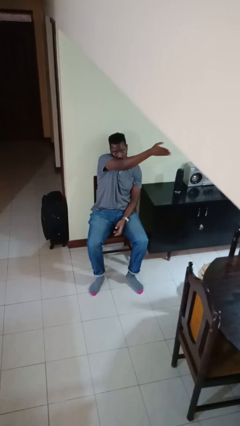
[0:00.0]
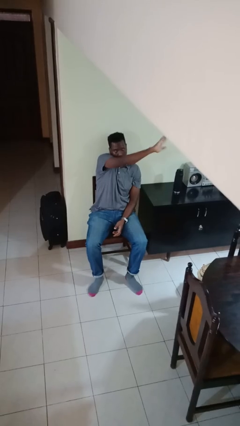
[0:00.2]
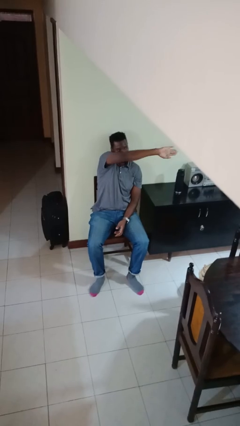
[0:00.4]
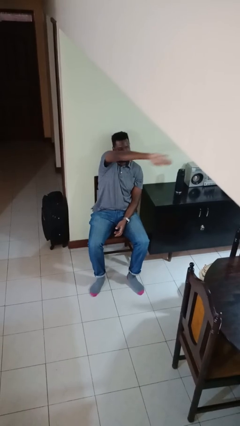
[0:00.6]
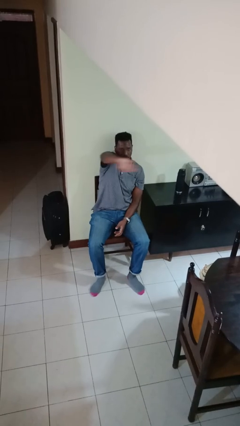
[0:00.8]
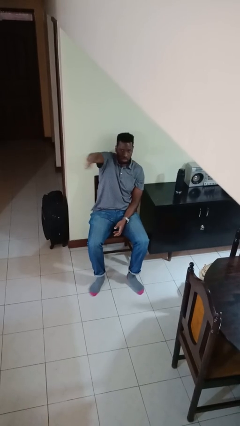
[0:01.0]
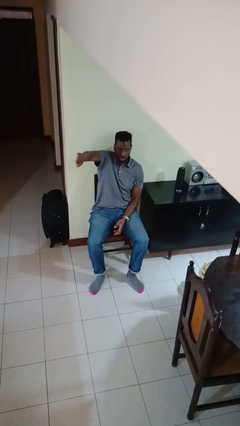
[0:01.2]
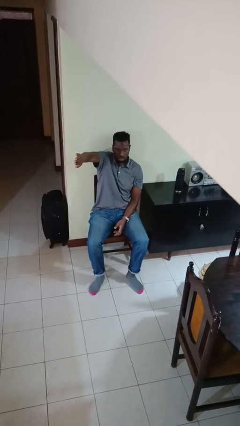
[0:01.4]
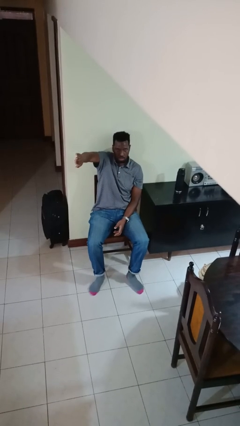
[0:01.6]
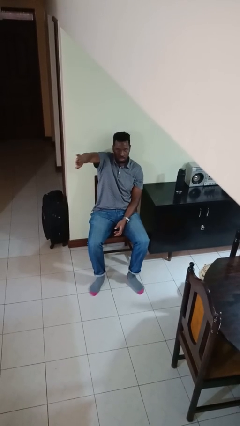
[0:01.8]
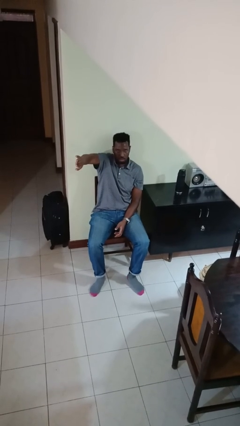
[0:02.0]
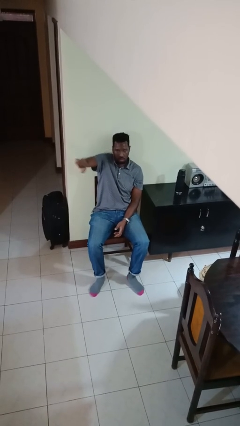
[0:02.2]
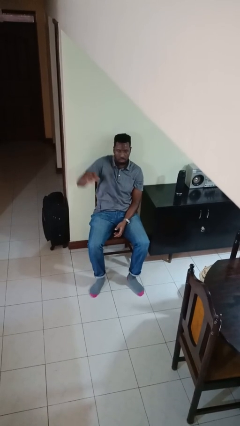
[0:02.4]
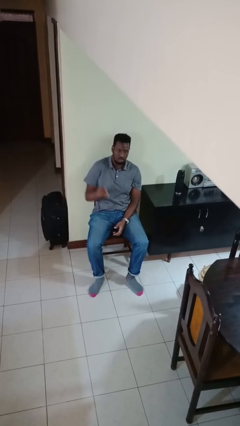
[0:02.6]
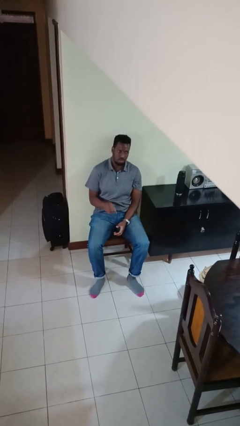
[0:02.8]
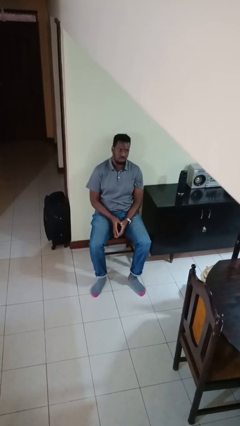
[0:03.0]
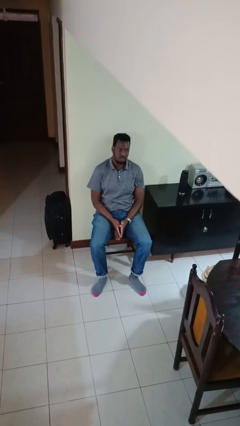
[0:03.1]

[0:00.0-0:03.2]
person gestures swipe right

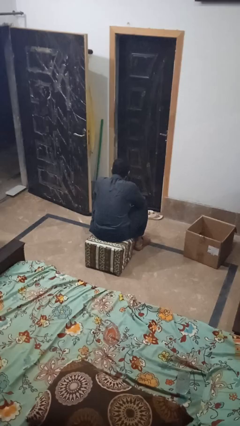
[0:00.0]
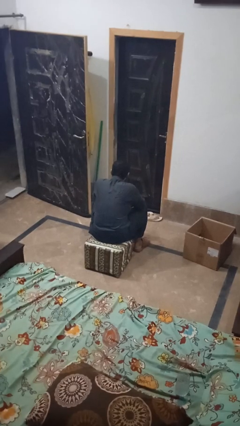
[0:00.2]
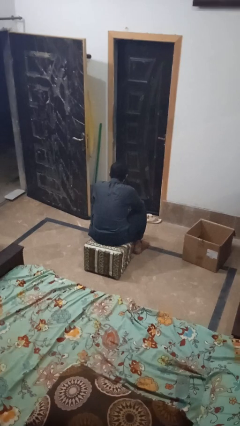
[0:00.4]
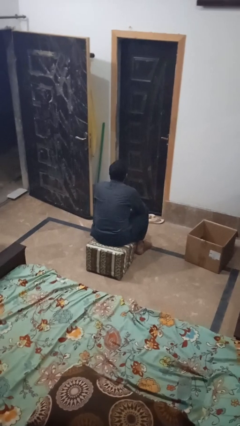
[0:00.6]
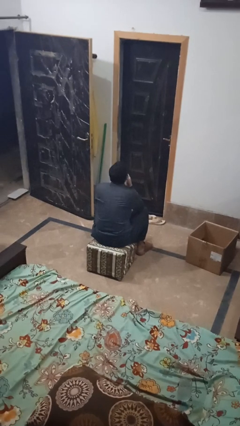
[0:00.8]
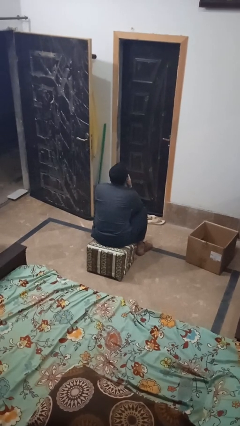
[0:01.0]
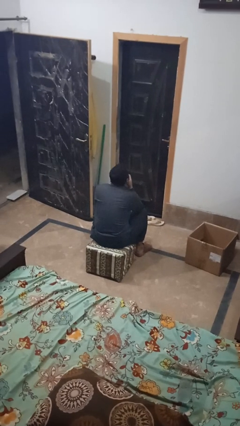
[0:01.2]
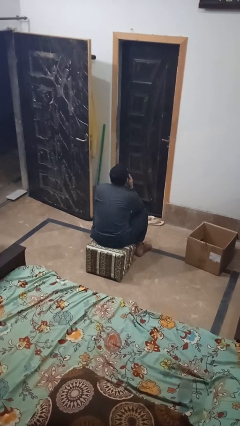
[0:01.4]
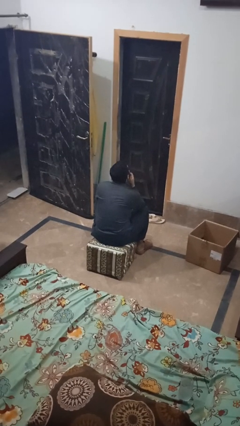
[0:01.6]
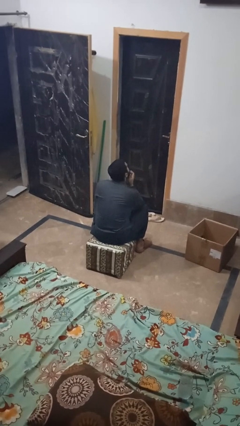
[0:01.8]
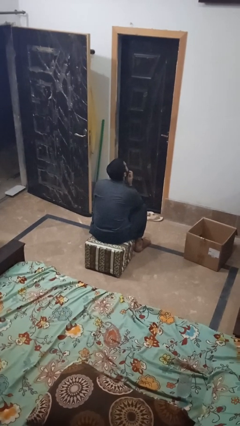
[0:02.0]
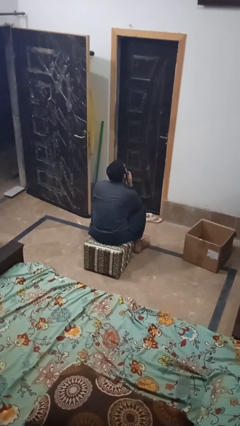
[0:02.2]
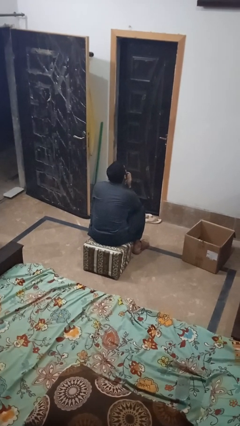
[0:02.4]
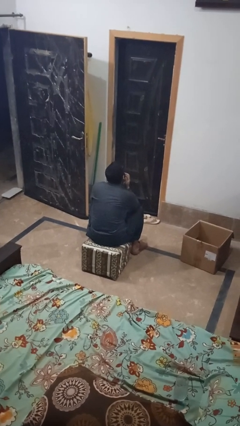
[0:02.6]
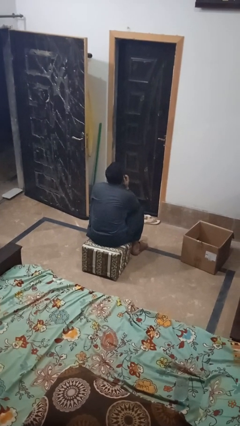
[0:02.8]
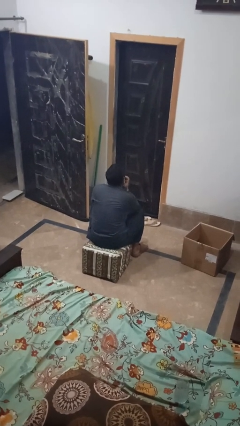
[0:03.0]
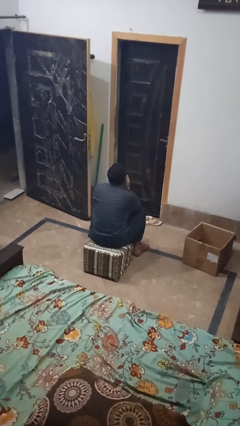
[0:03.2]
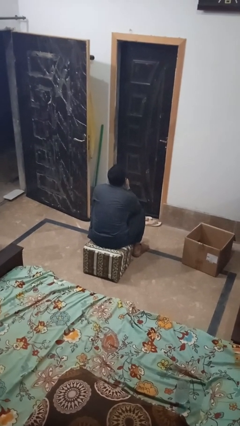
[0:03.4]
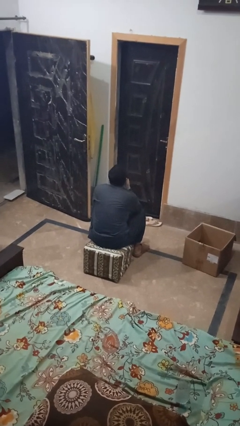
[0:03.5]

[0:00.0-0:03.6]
person strokes chin

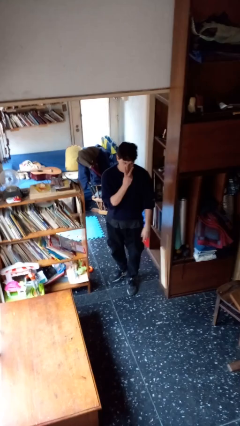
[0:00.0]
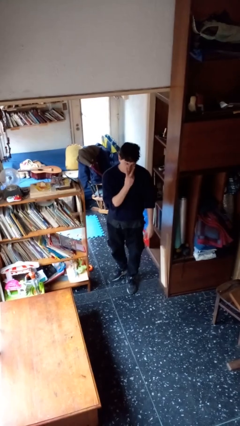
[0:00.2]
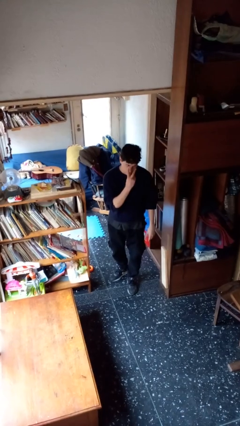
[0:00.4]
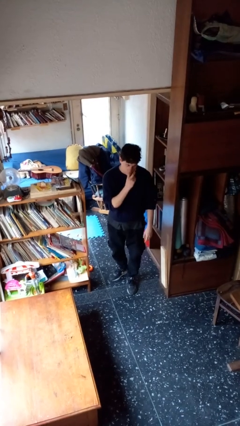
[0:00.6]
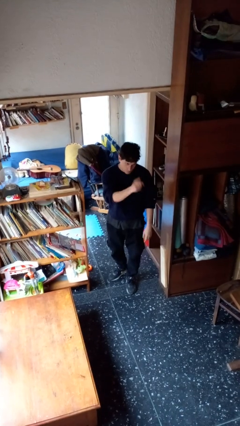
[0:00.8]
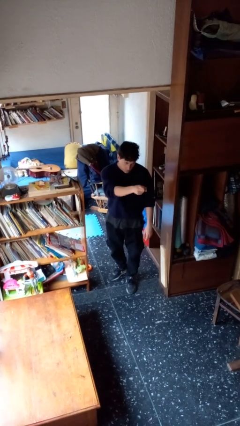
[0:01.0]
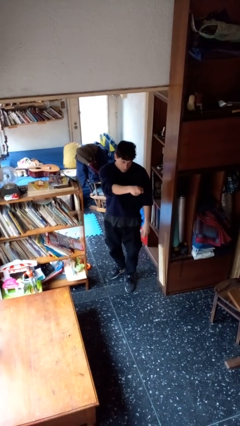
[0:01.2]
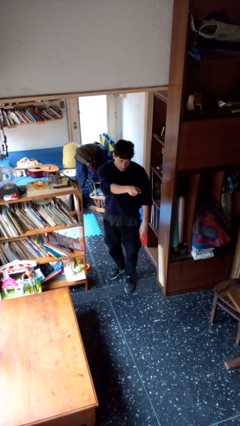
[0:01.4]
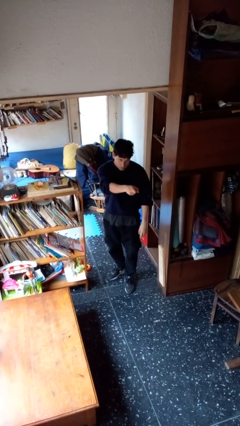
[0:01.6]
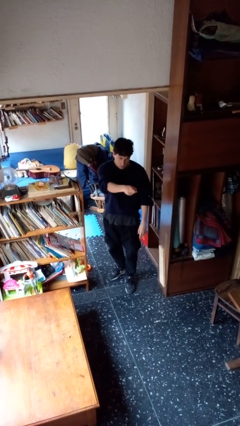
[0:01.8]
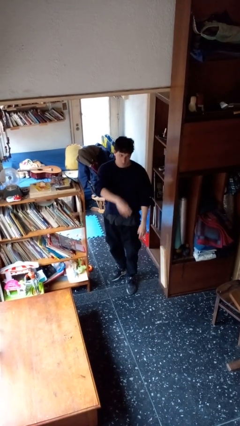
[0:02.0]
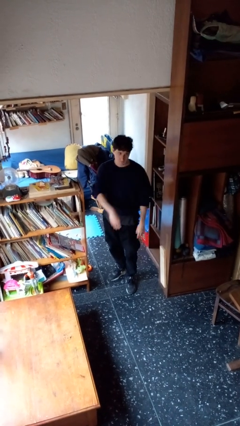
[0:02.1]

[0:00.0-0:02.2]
person gestures watch closely

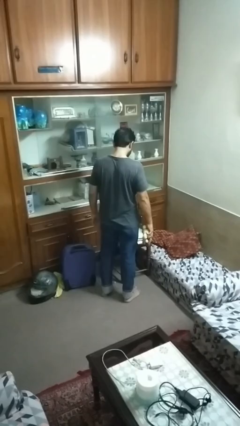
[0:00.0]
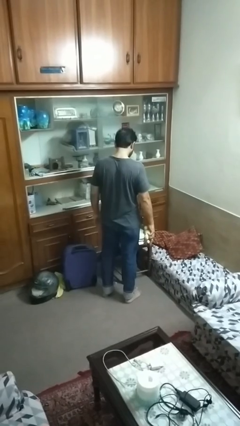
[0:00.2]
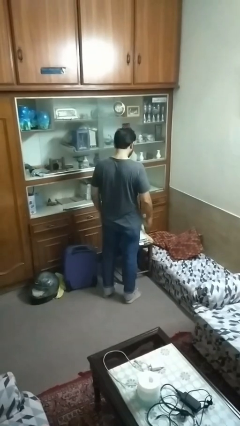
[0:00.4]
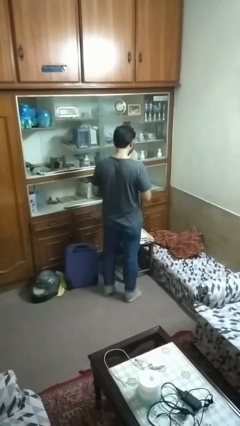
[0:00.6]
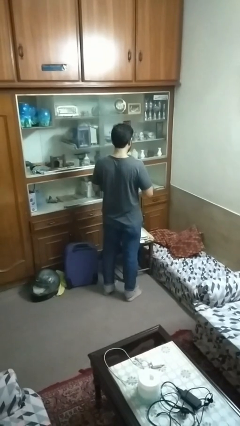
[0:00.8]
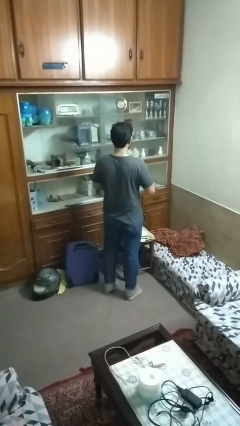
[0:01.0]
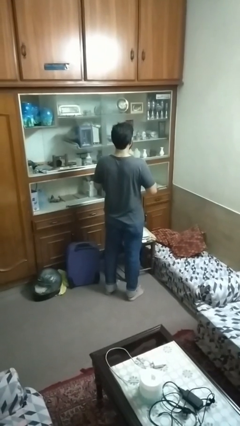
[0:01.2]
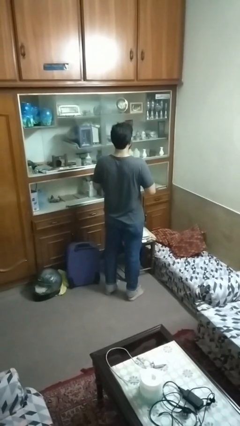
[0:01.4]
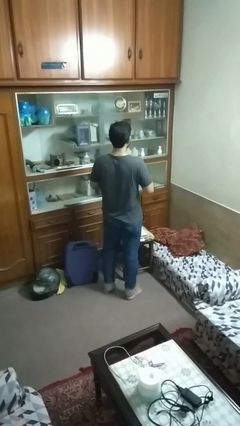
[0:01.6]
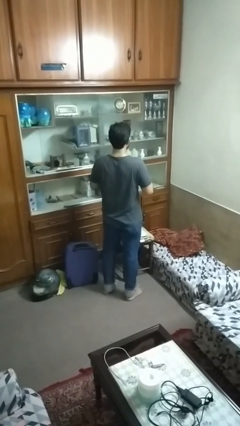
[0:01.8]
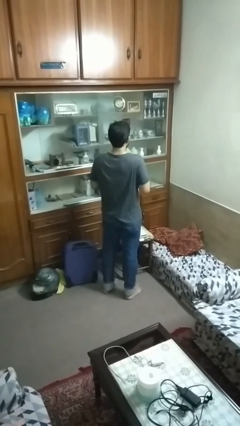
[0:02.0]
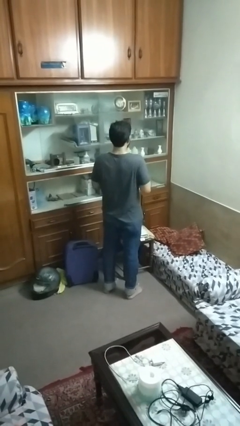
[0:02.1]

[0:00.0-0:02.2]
person hugs stuffed animal

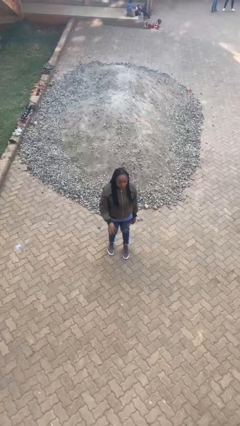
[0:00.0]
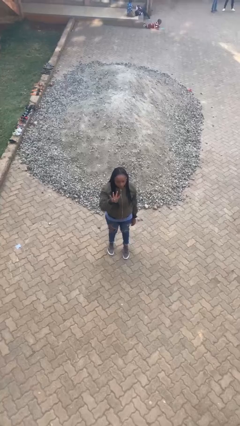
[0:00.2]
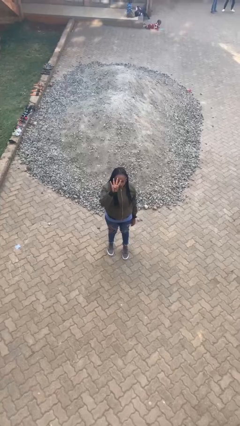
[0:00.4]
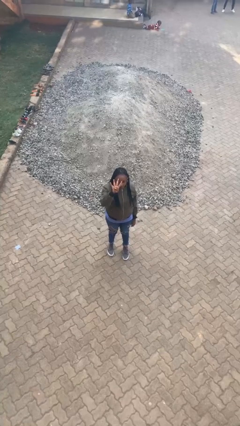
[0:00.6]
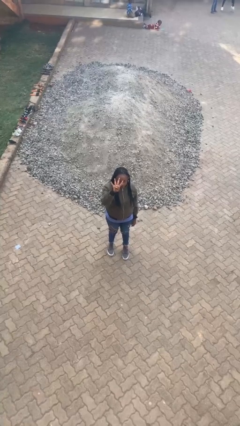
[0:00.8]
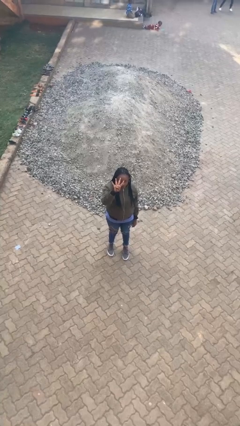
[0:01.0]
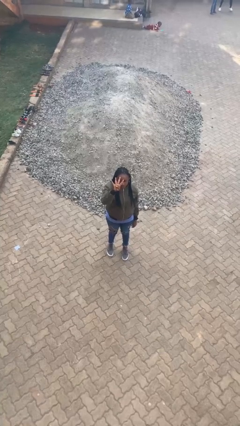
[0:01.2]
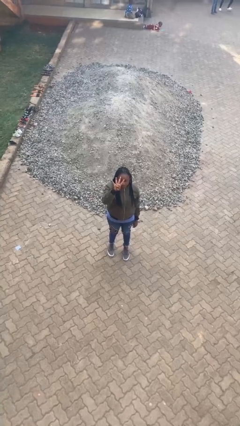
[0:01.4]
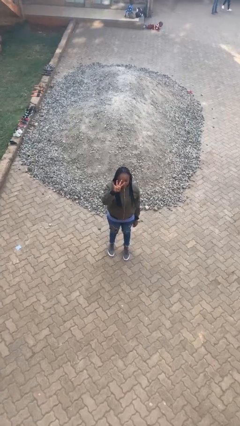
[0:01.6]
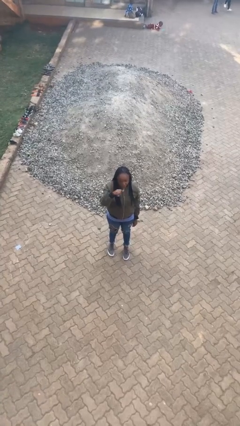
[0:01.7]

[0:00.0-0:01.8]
person gestures number four

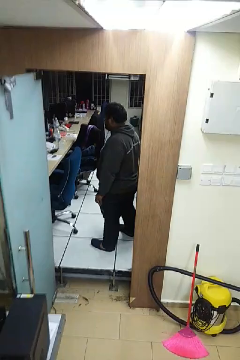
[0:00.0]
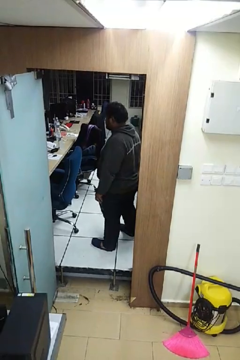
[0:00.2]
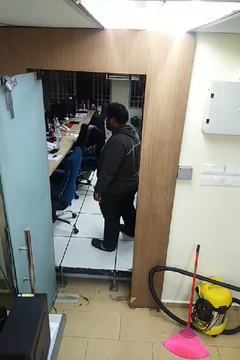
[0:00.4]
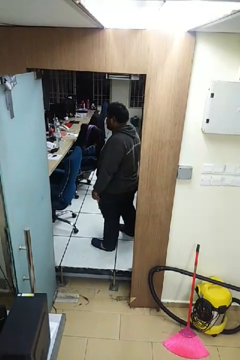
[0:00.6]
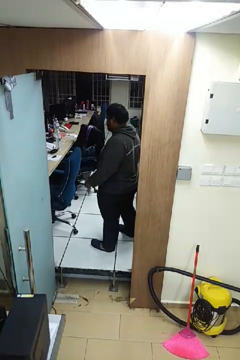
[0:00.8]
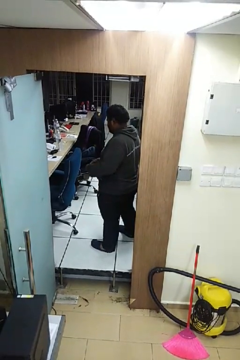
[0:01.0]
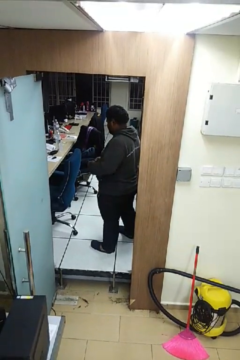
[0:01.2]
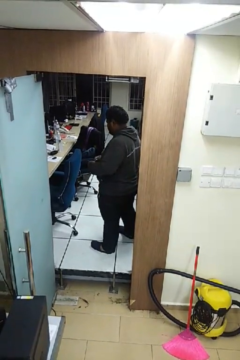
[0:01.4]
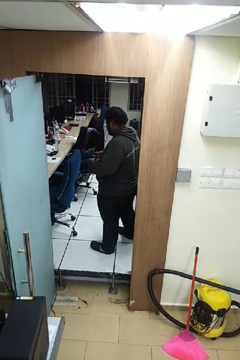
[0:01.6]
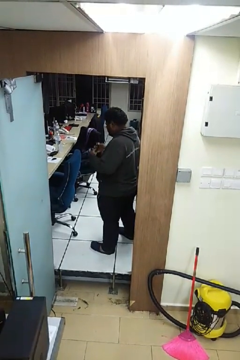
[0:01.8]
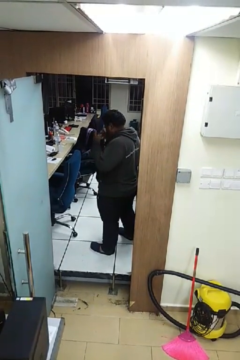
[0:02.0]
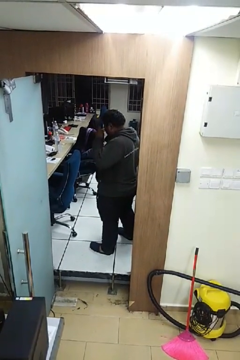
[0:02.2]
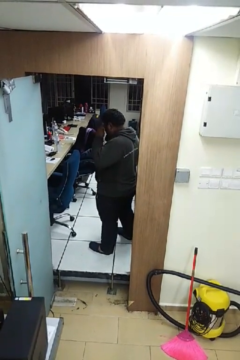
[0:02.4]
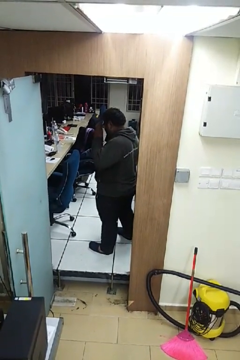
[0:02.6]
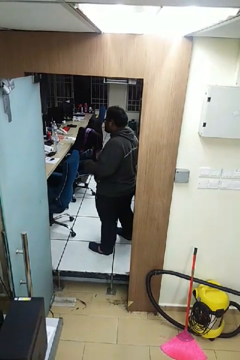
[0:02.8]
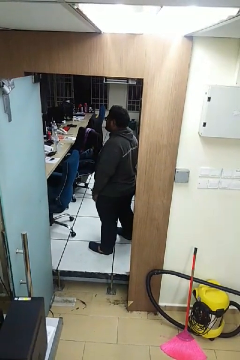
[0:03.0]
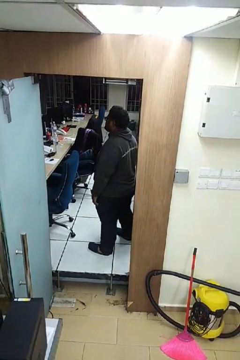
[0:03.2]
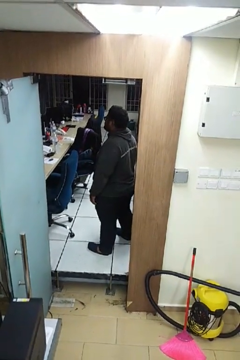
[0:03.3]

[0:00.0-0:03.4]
person puts on glasses

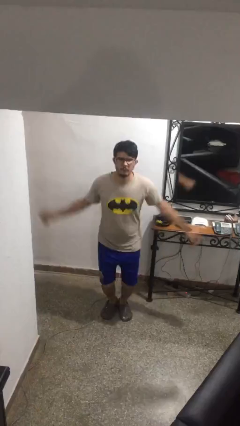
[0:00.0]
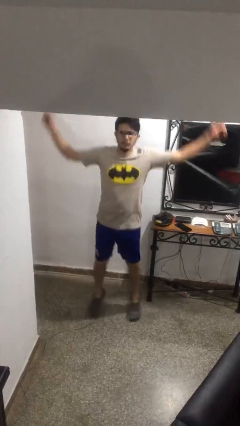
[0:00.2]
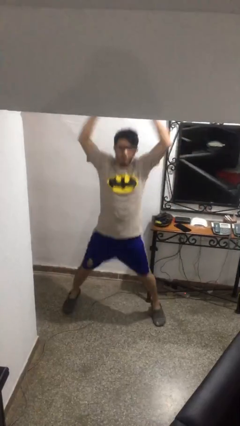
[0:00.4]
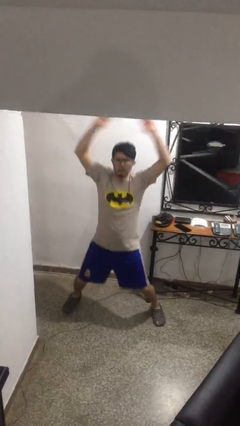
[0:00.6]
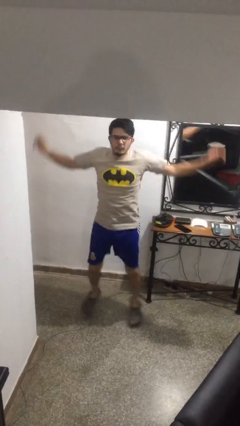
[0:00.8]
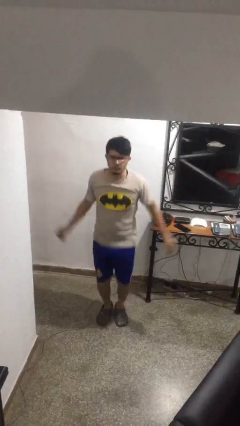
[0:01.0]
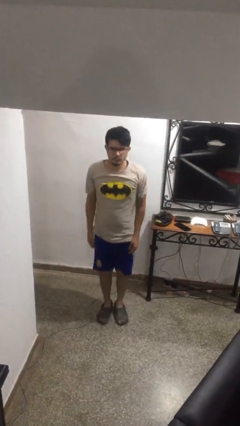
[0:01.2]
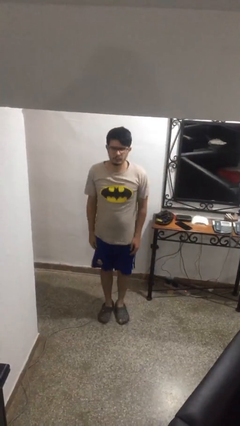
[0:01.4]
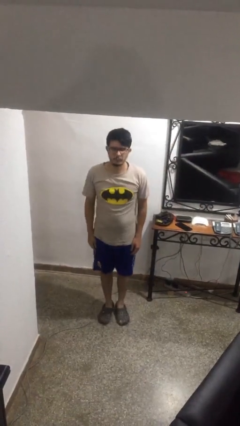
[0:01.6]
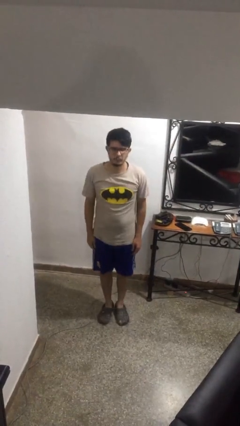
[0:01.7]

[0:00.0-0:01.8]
person exercises with jumping jacks
